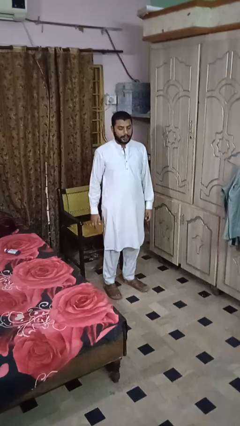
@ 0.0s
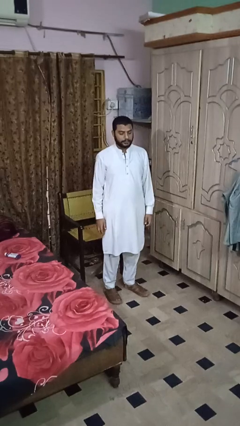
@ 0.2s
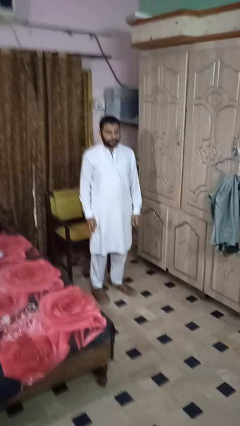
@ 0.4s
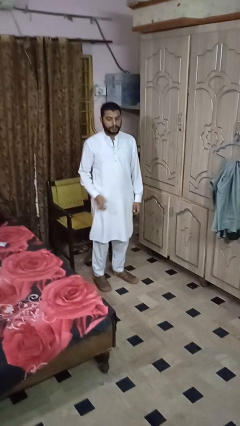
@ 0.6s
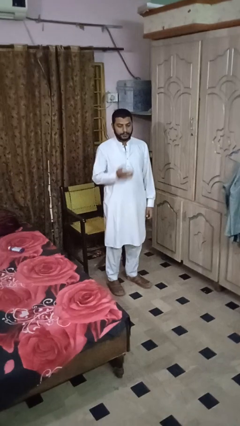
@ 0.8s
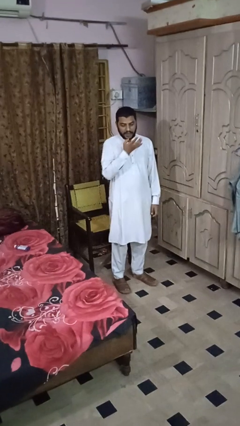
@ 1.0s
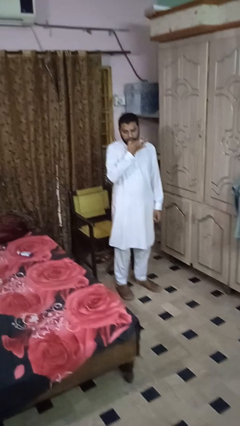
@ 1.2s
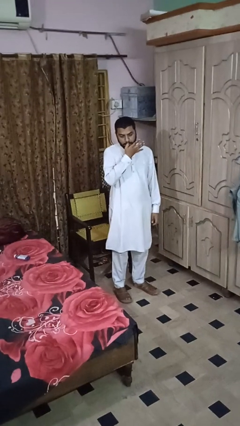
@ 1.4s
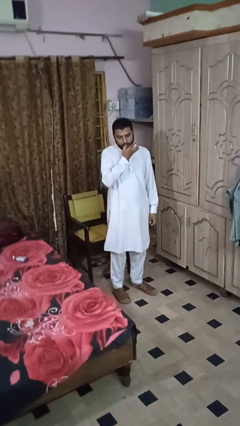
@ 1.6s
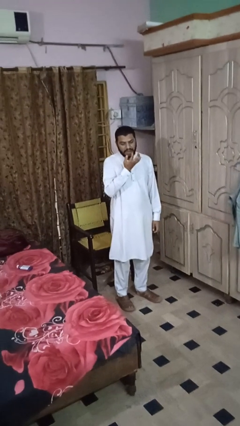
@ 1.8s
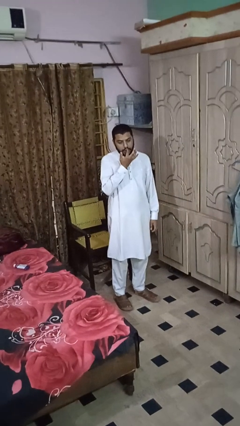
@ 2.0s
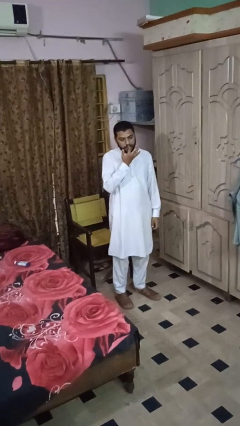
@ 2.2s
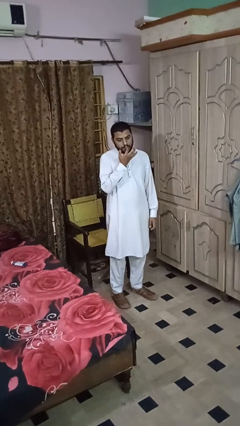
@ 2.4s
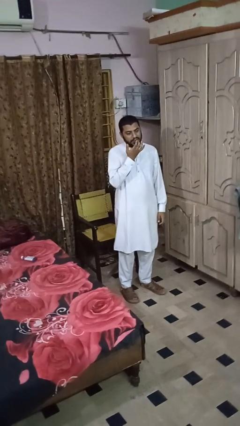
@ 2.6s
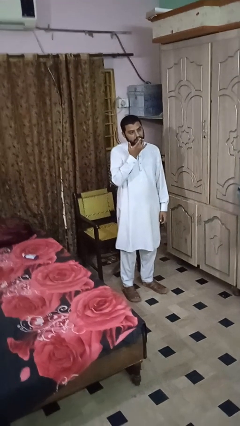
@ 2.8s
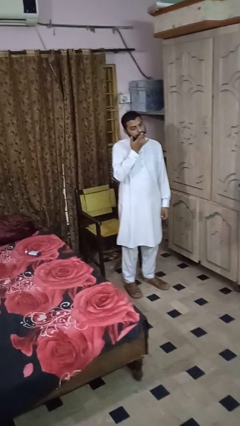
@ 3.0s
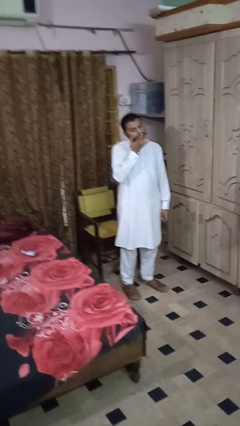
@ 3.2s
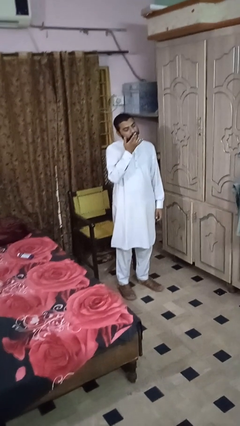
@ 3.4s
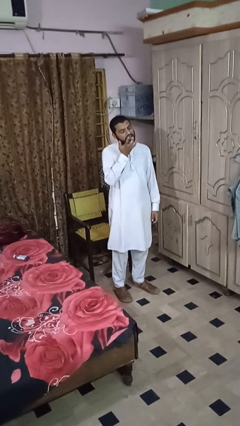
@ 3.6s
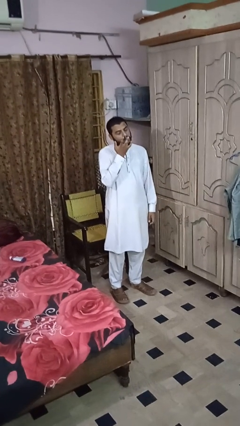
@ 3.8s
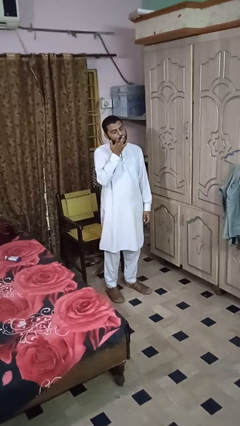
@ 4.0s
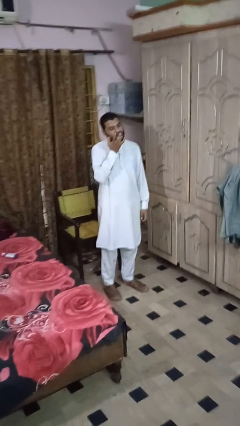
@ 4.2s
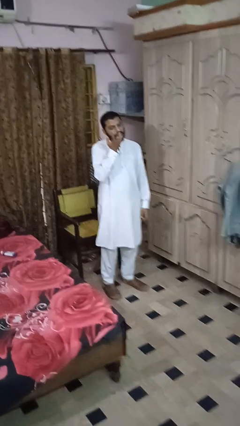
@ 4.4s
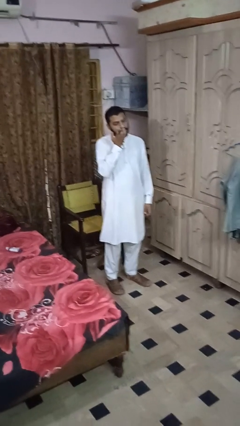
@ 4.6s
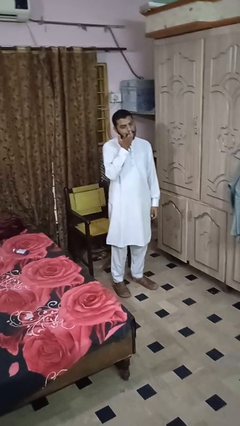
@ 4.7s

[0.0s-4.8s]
person licks fingers

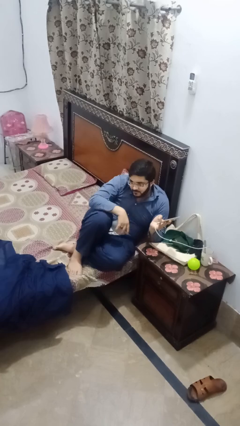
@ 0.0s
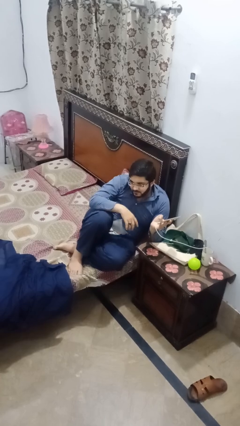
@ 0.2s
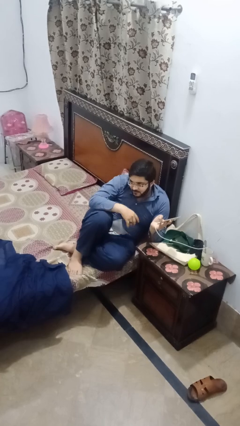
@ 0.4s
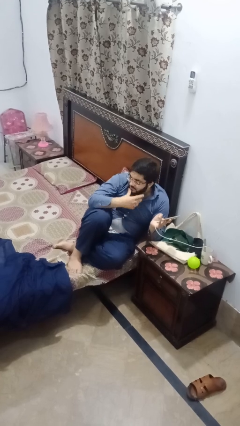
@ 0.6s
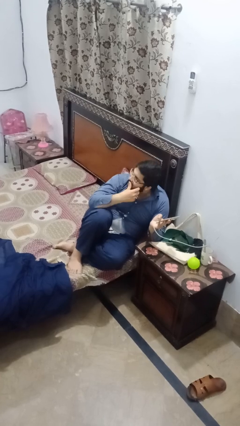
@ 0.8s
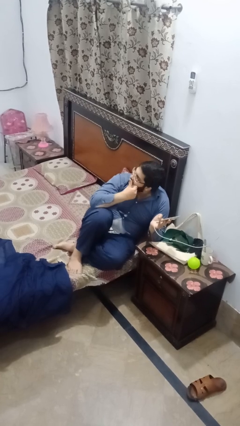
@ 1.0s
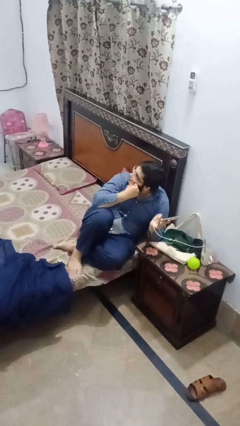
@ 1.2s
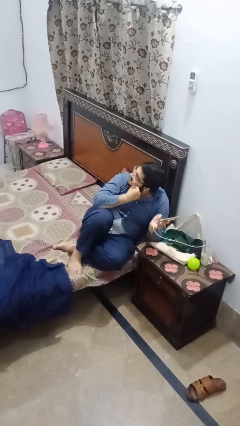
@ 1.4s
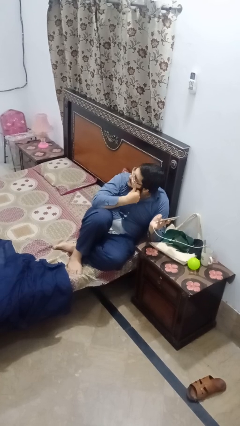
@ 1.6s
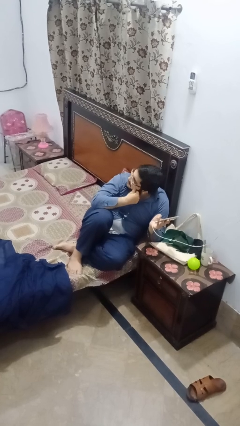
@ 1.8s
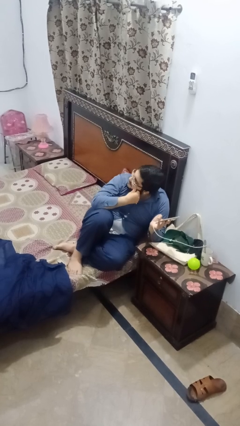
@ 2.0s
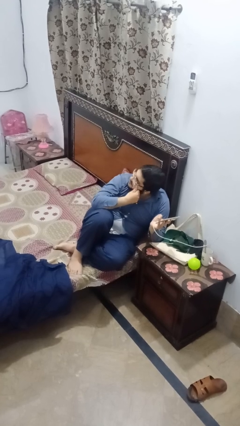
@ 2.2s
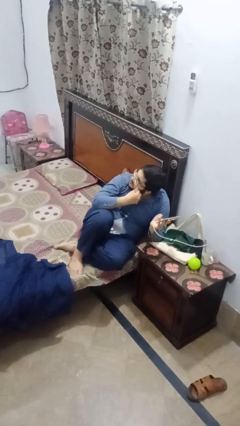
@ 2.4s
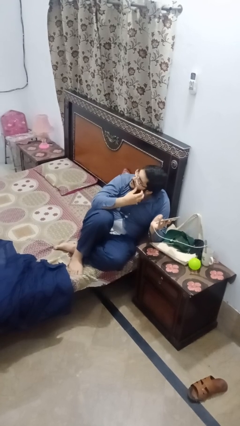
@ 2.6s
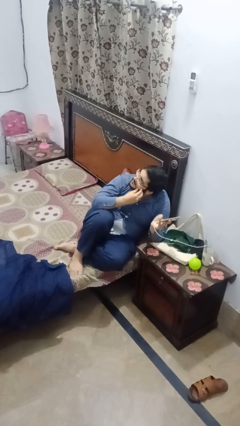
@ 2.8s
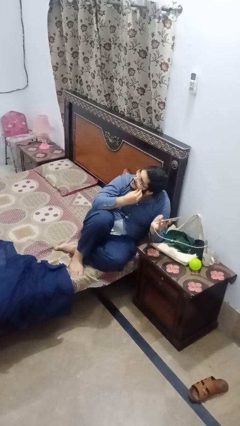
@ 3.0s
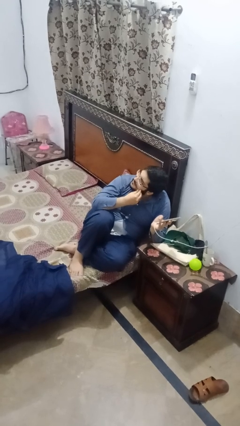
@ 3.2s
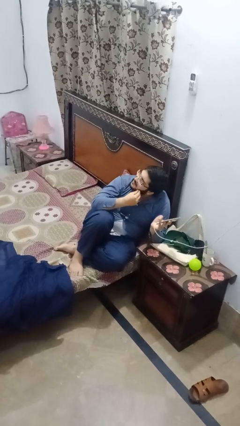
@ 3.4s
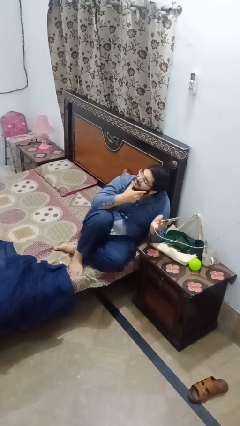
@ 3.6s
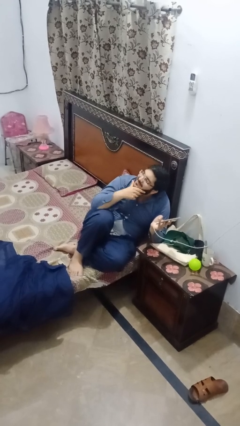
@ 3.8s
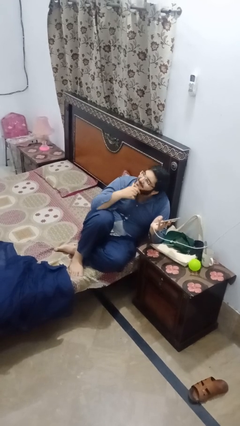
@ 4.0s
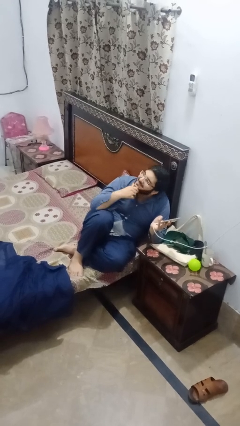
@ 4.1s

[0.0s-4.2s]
person strokes chin

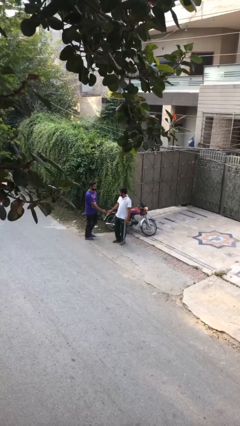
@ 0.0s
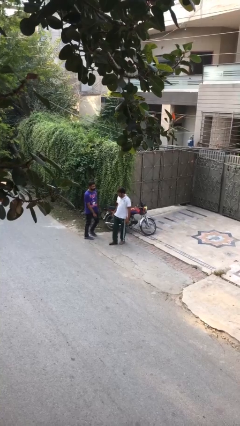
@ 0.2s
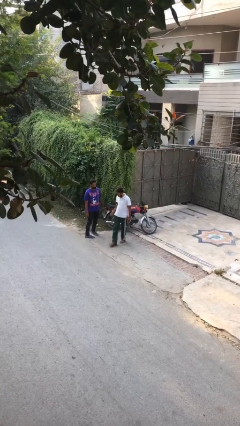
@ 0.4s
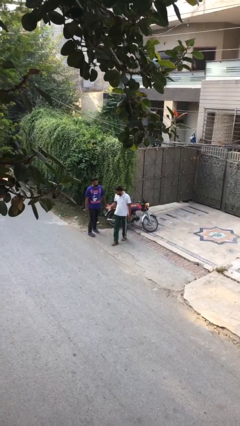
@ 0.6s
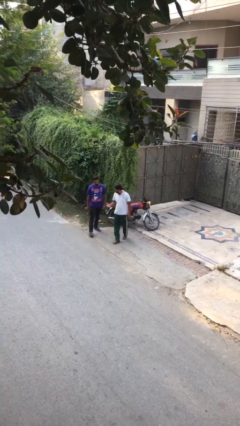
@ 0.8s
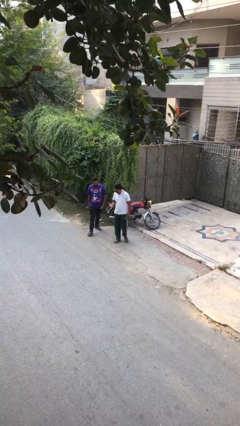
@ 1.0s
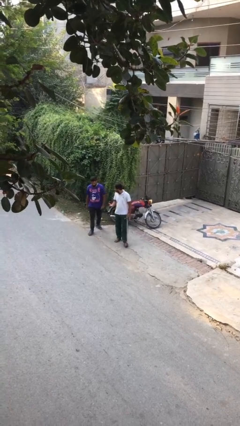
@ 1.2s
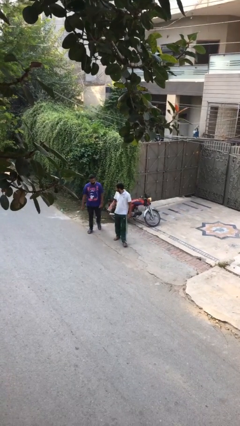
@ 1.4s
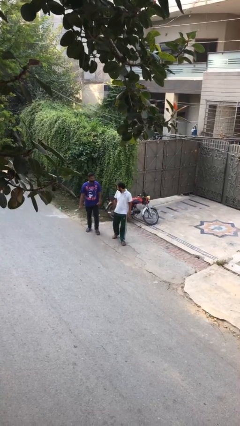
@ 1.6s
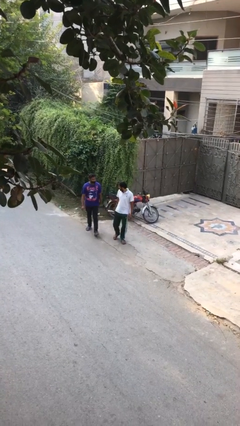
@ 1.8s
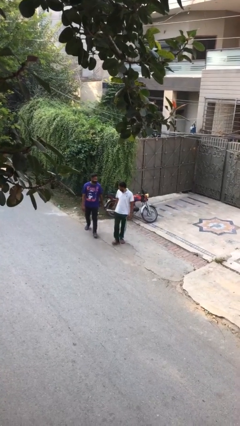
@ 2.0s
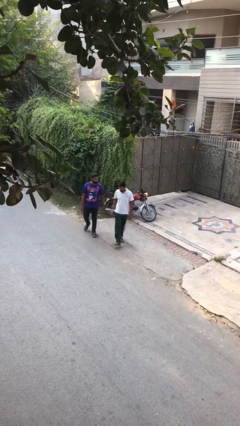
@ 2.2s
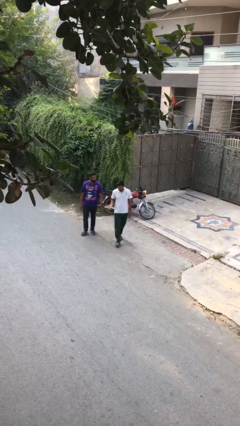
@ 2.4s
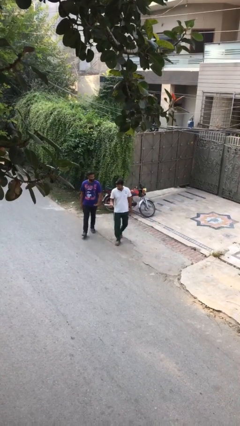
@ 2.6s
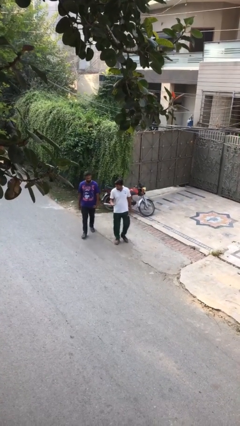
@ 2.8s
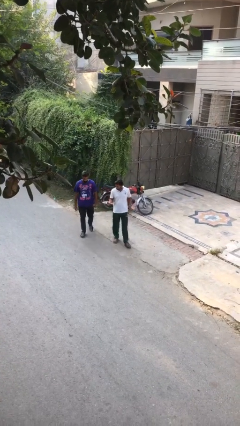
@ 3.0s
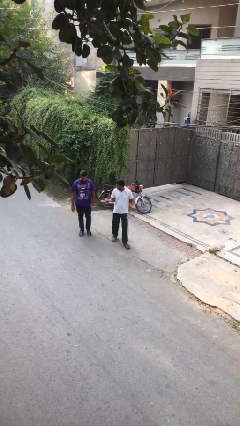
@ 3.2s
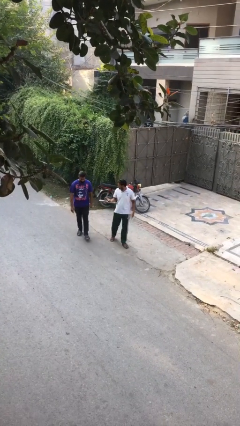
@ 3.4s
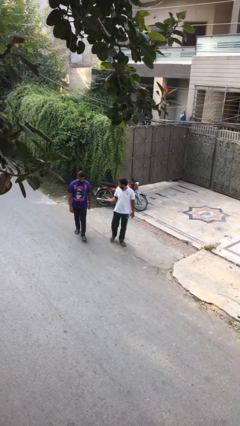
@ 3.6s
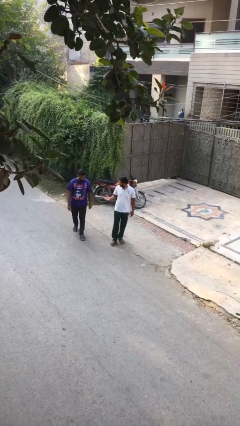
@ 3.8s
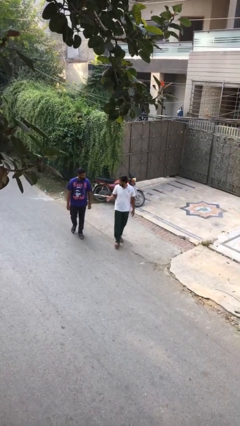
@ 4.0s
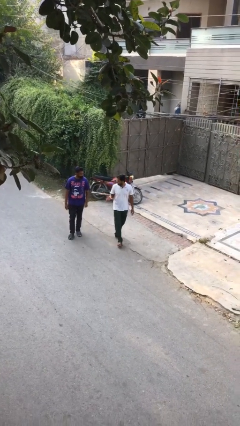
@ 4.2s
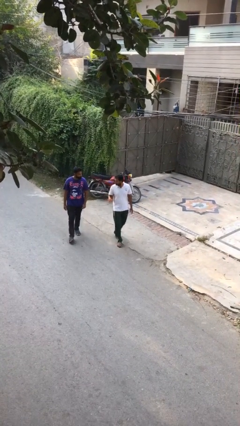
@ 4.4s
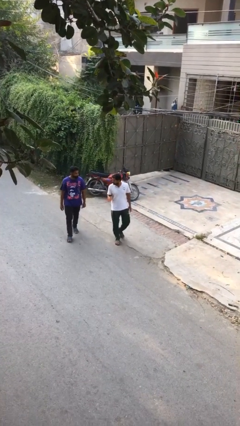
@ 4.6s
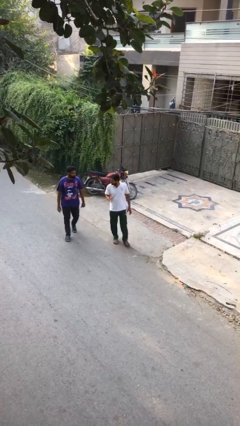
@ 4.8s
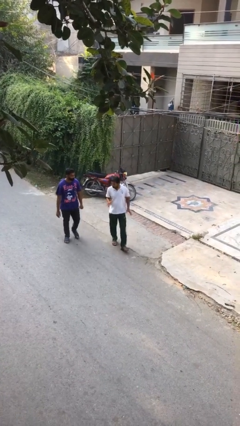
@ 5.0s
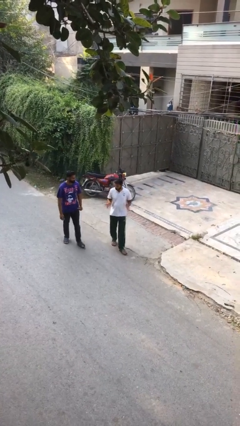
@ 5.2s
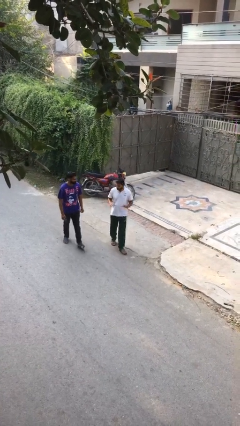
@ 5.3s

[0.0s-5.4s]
person talks to person

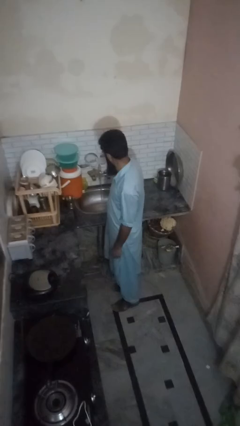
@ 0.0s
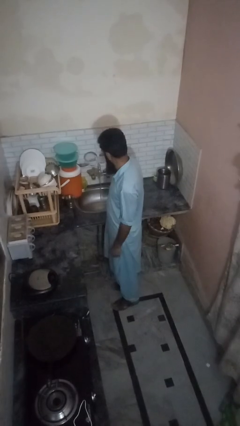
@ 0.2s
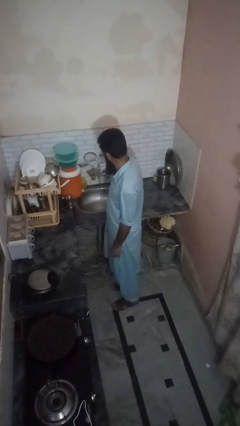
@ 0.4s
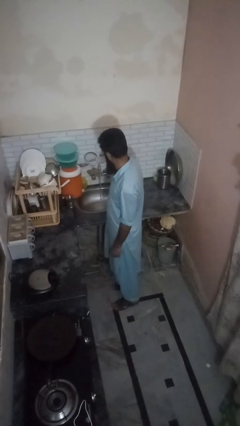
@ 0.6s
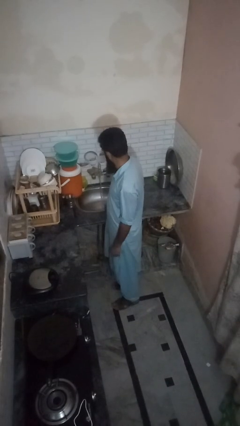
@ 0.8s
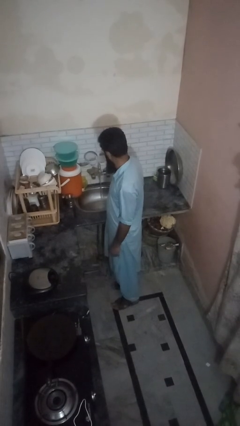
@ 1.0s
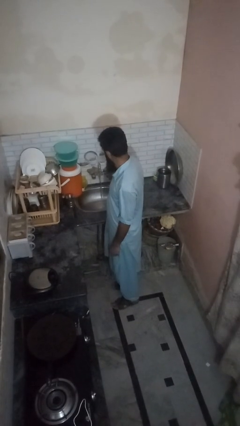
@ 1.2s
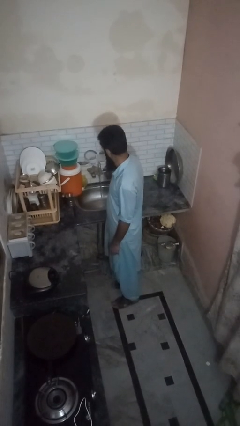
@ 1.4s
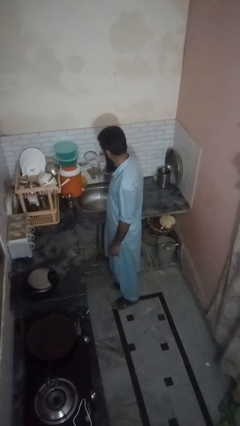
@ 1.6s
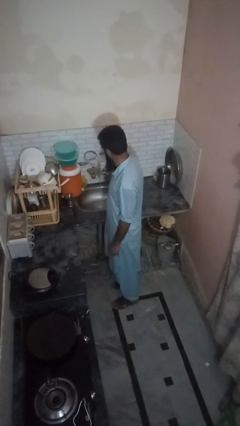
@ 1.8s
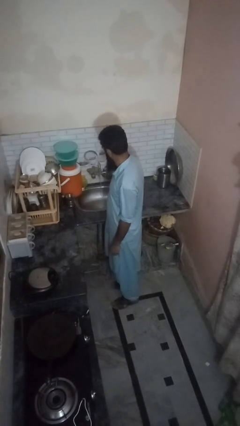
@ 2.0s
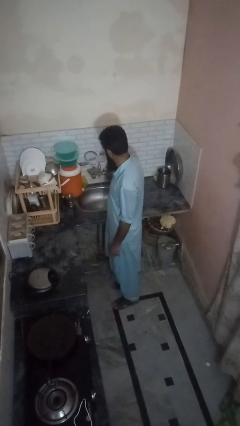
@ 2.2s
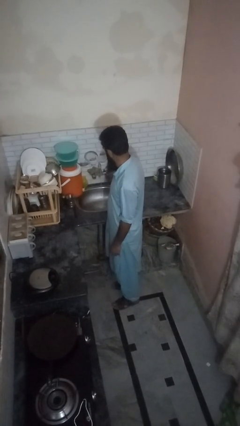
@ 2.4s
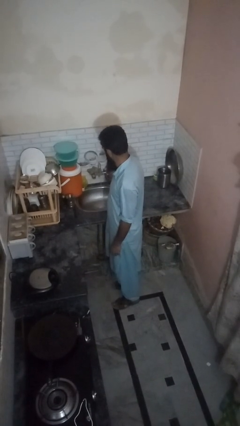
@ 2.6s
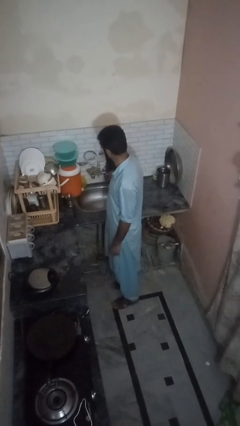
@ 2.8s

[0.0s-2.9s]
person turns off faucet

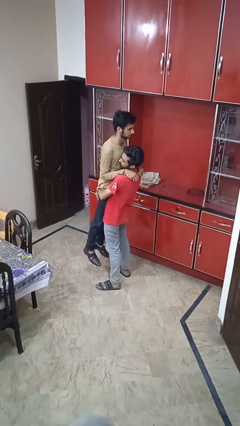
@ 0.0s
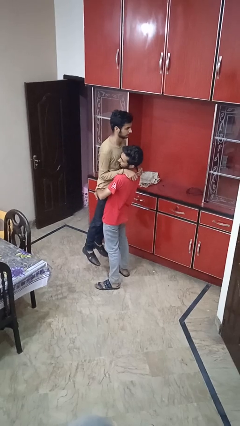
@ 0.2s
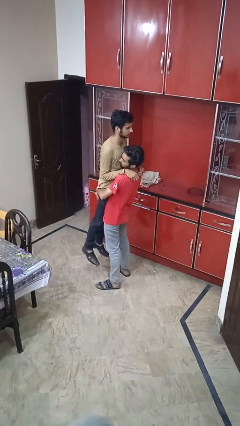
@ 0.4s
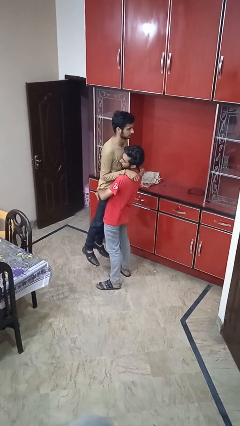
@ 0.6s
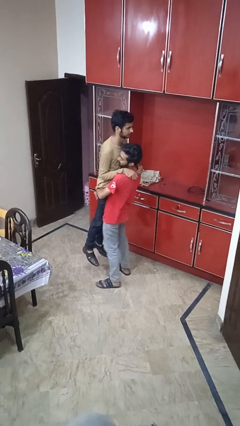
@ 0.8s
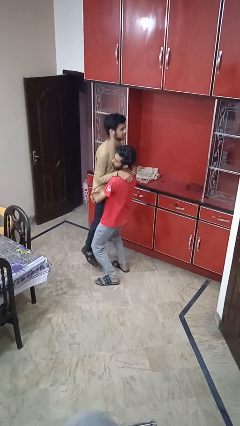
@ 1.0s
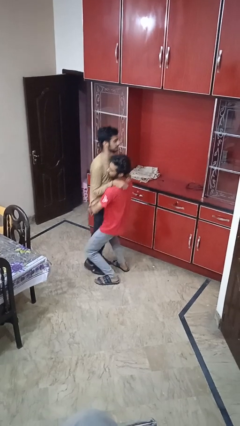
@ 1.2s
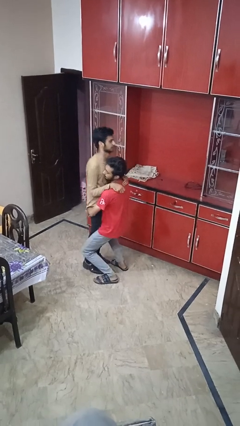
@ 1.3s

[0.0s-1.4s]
person puts down person
